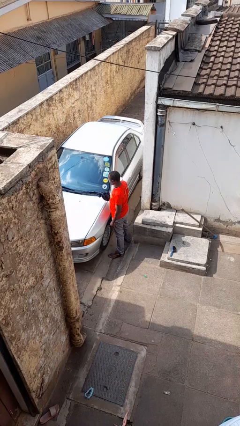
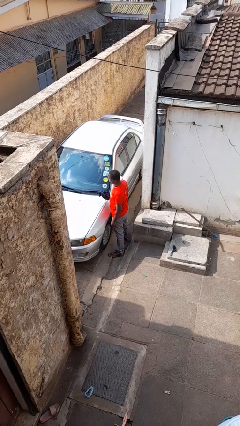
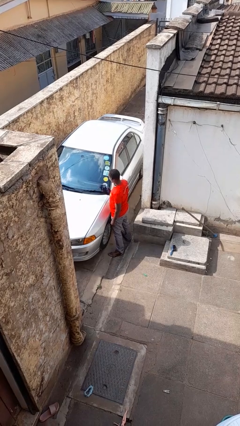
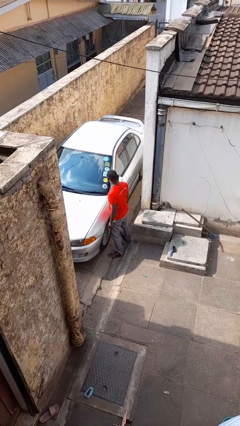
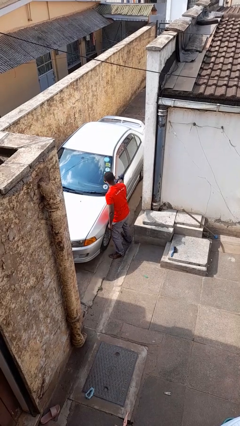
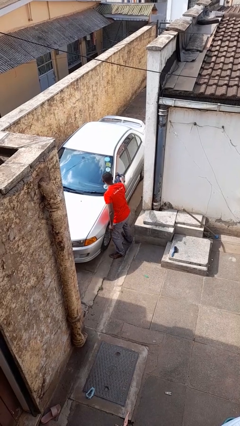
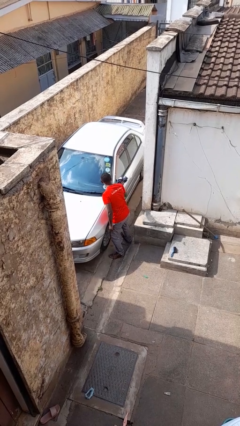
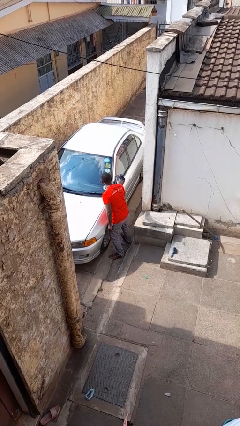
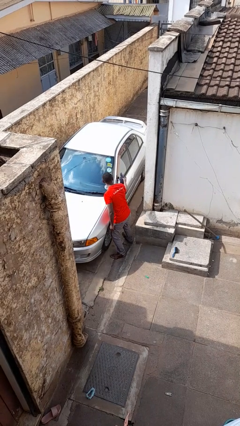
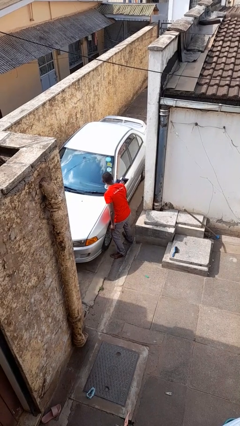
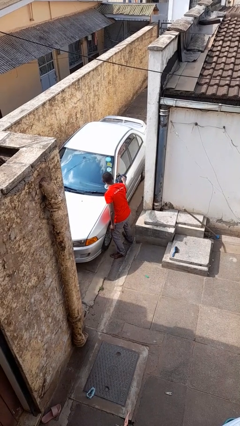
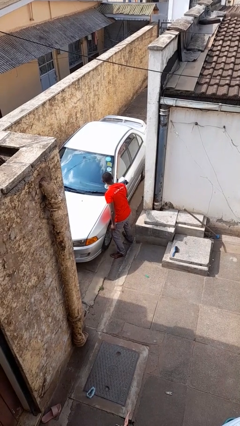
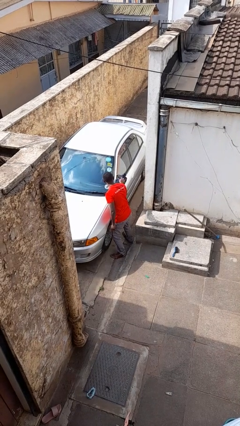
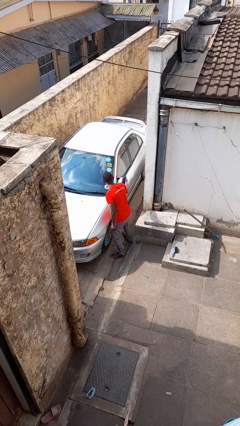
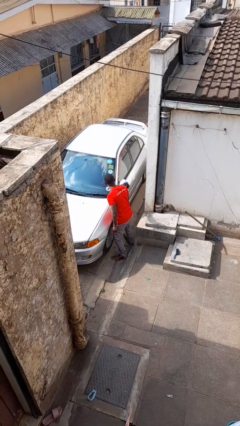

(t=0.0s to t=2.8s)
person polishes car with rag

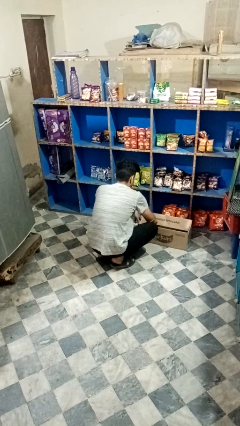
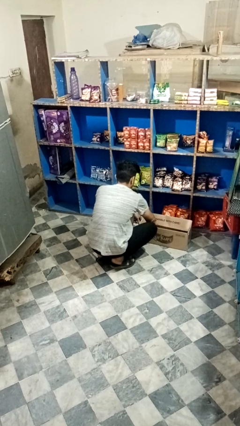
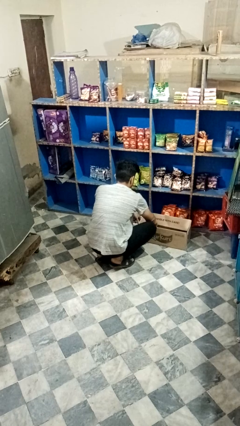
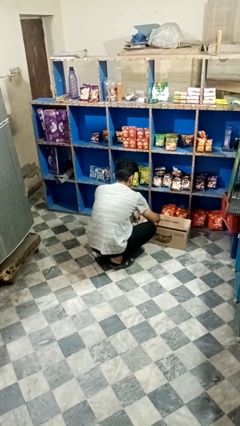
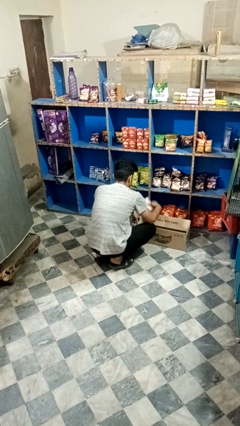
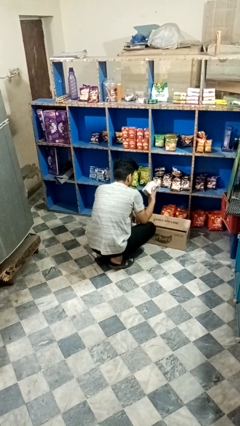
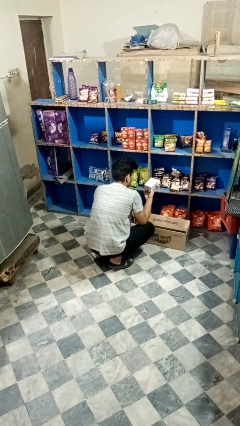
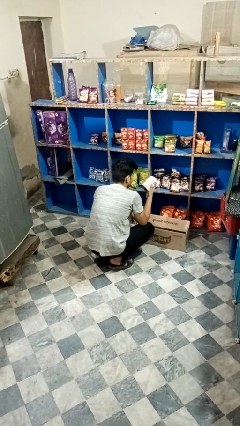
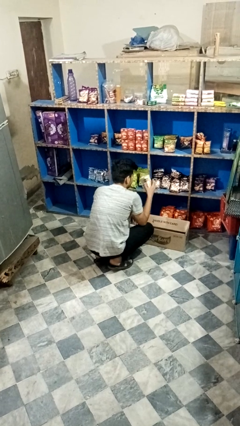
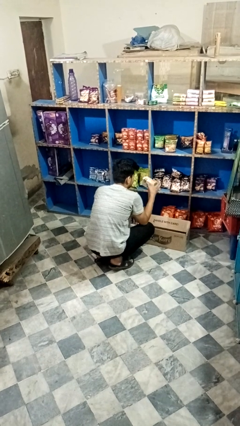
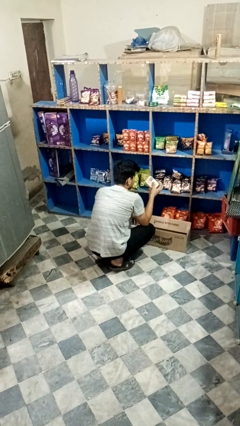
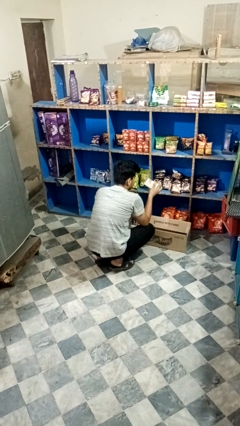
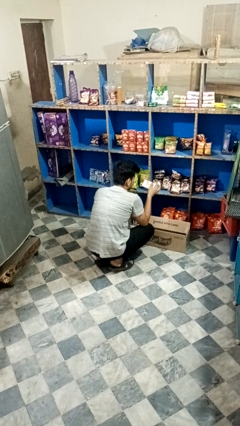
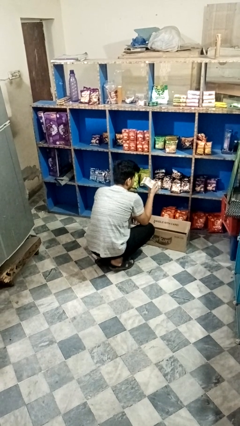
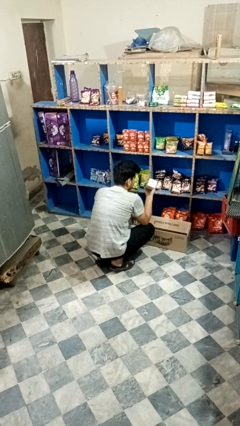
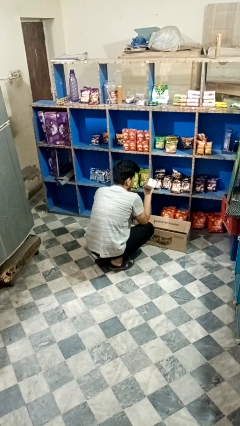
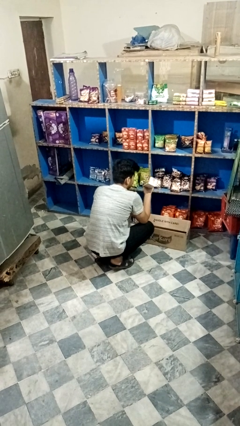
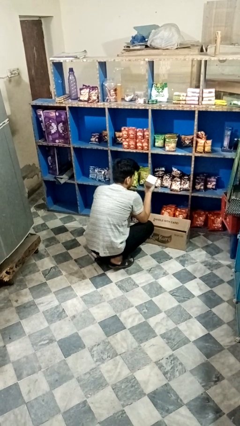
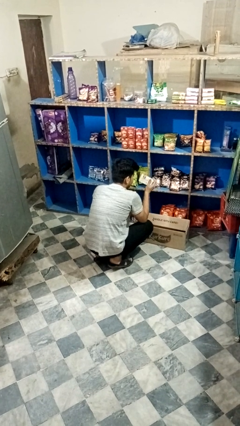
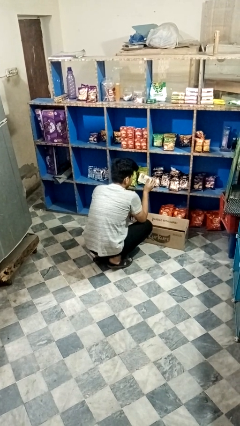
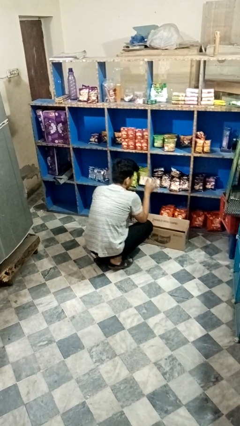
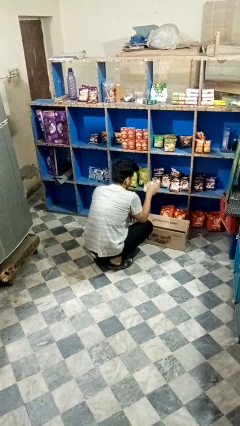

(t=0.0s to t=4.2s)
person takes object from box

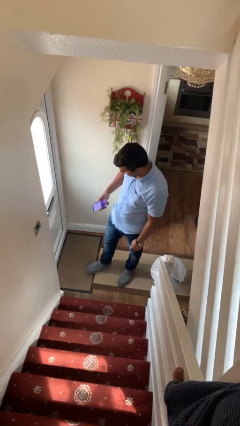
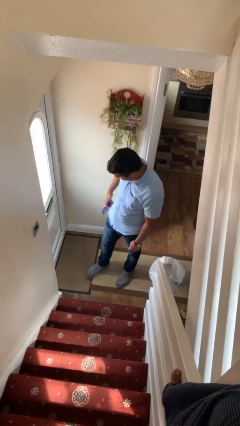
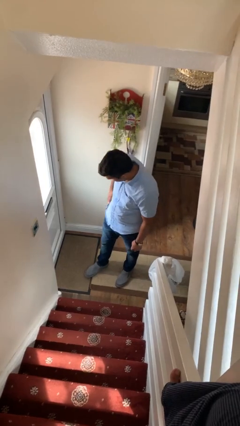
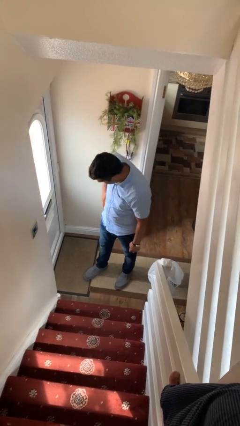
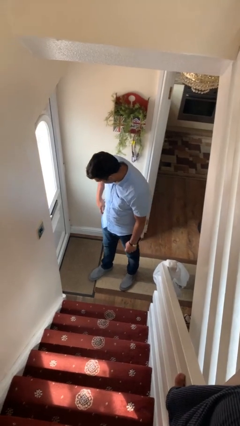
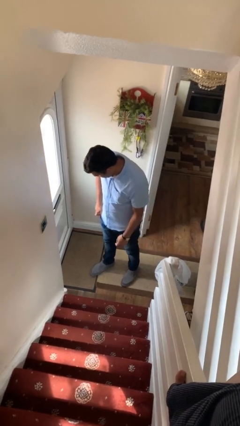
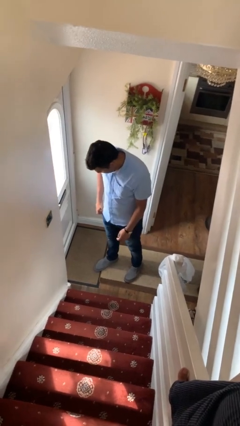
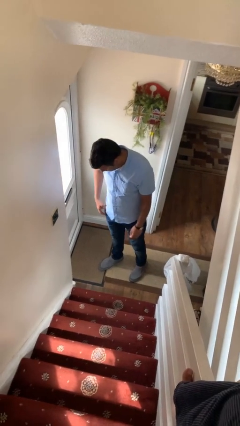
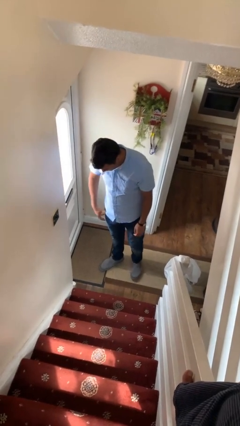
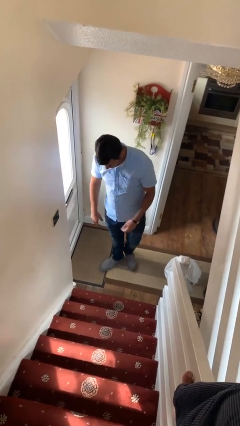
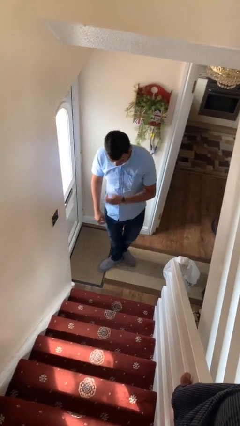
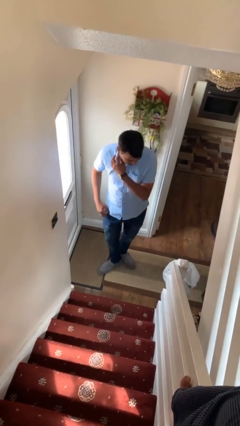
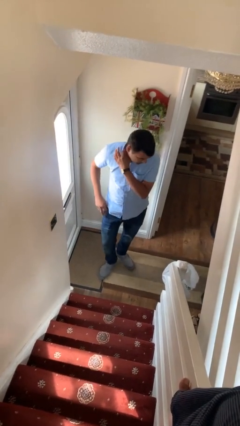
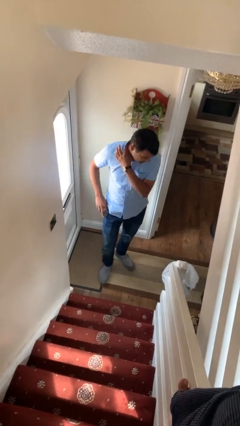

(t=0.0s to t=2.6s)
person puts phone into pocket

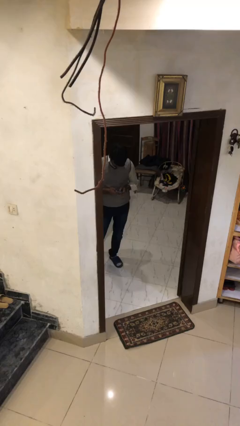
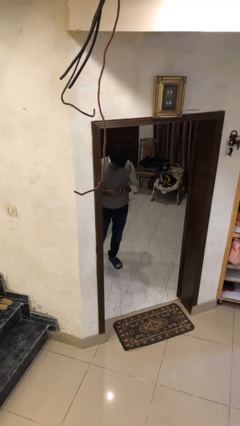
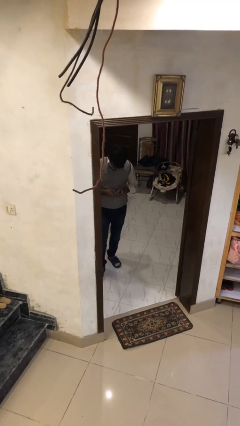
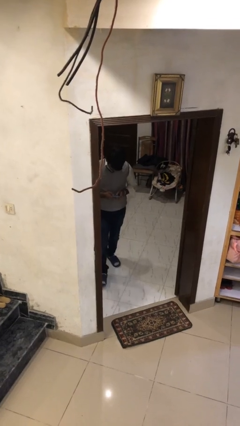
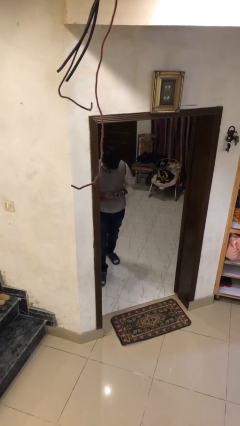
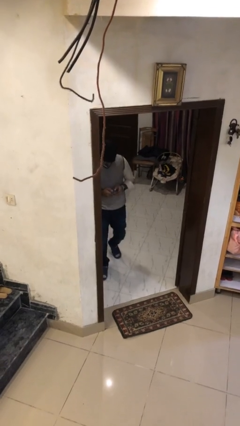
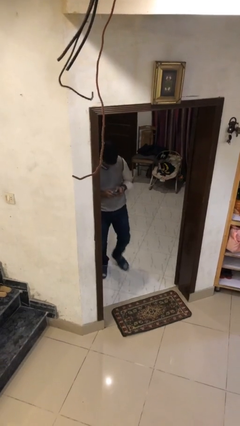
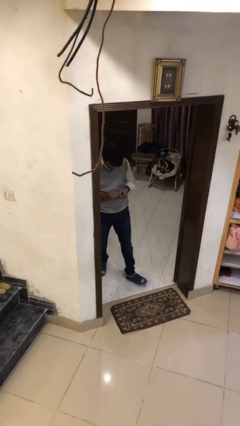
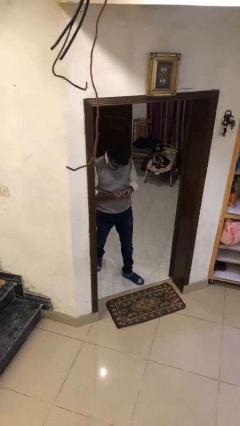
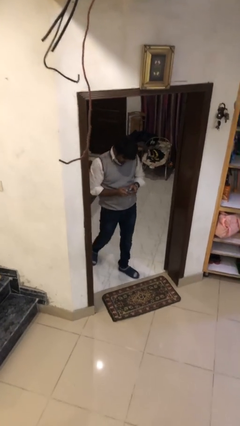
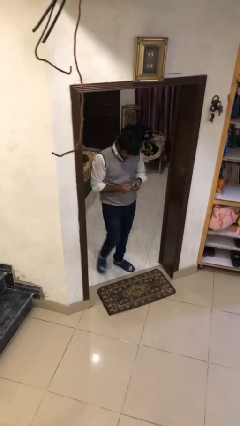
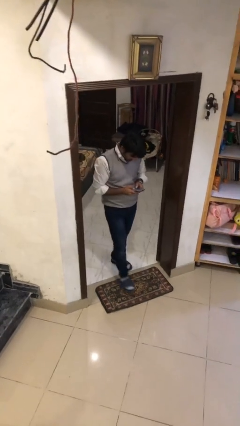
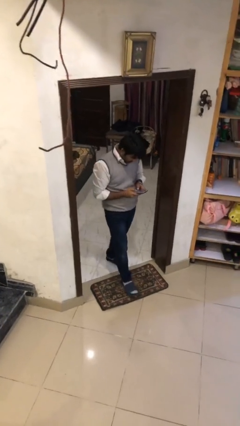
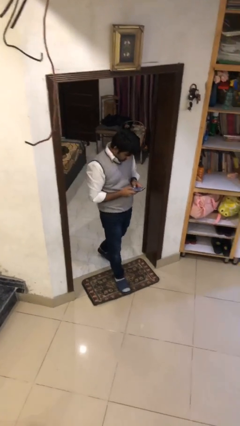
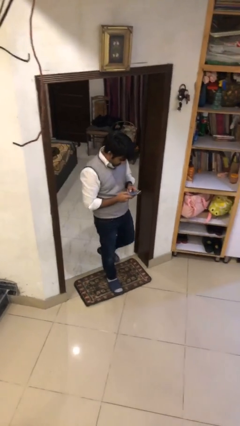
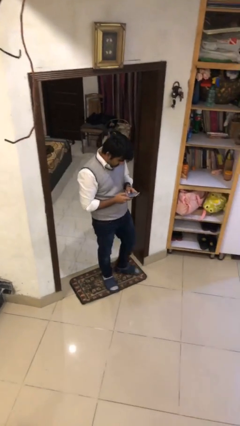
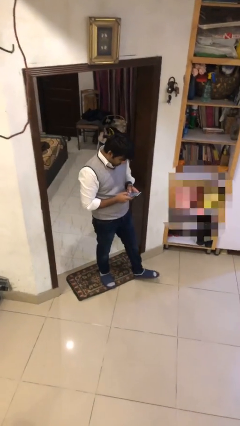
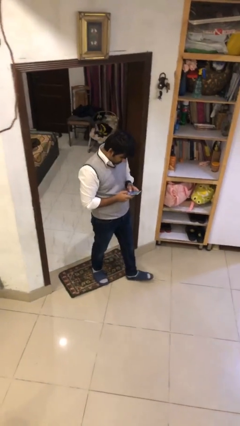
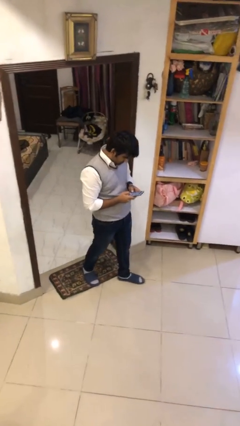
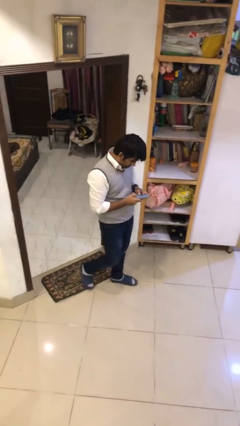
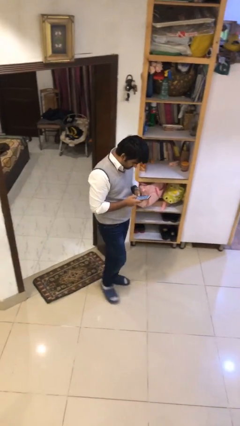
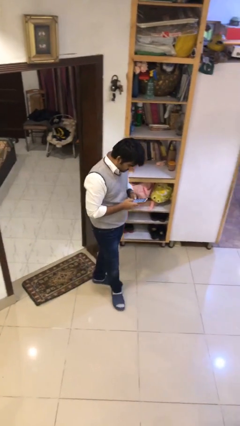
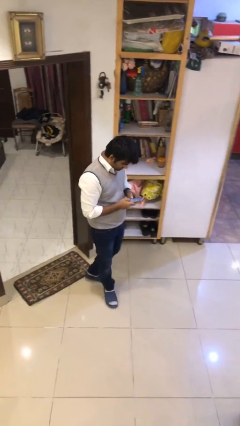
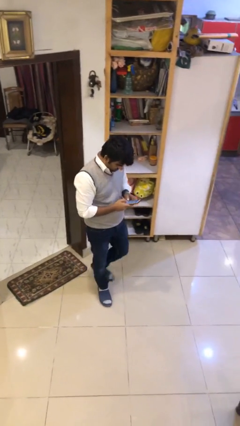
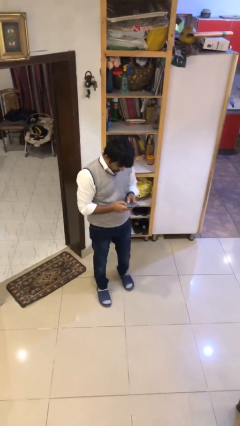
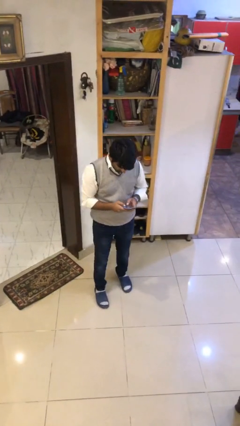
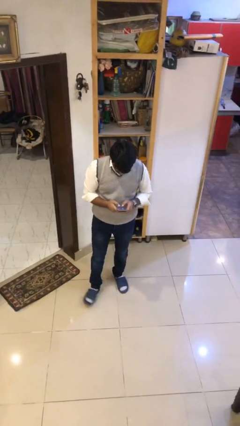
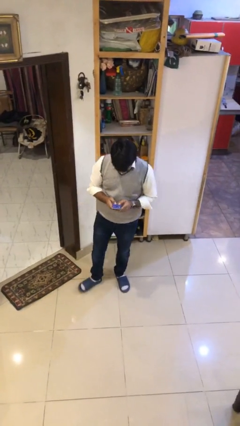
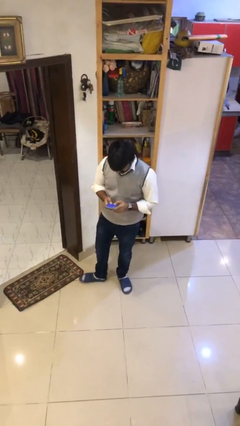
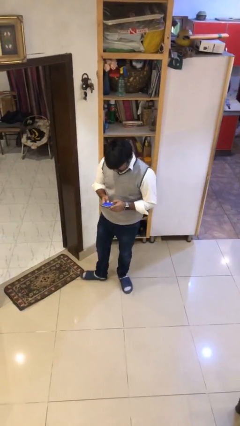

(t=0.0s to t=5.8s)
person enters scene through structure

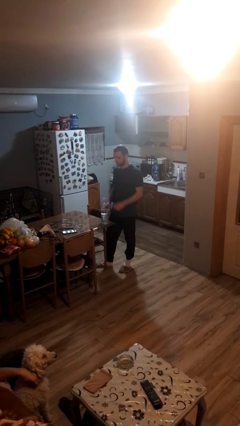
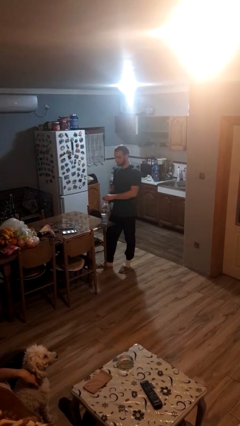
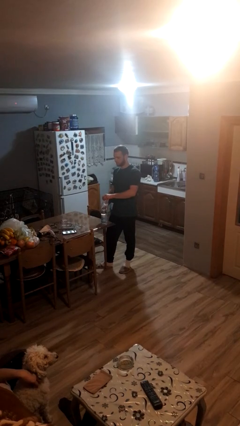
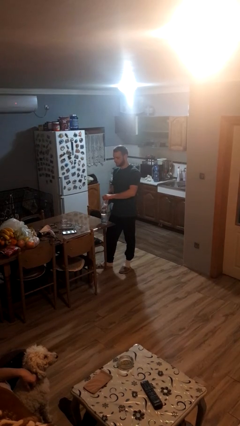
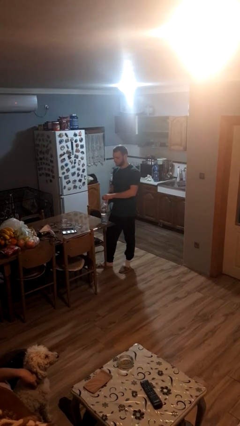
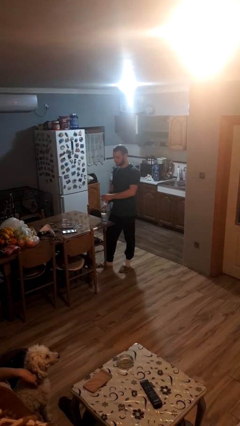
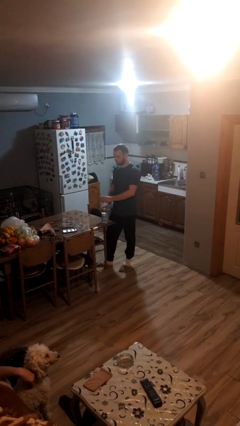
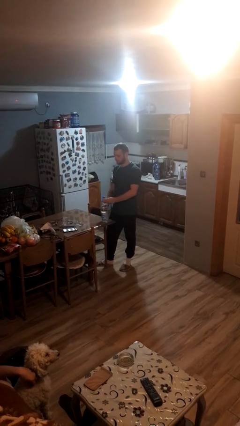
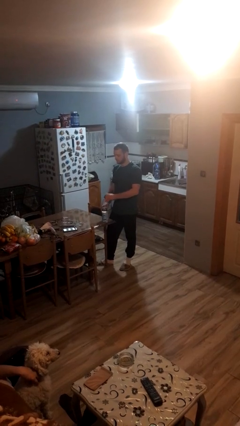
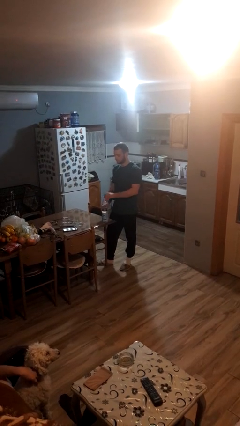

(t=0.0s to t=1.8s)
person screws lid to bottle

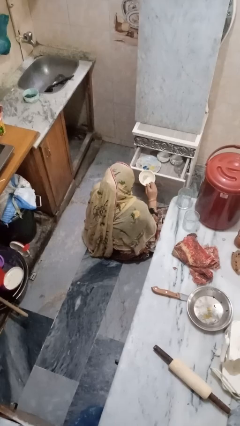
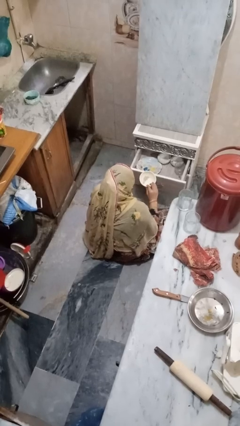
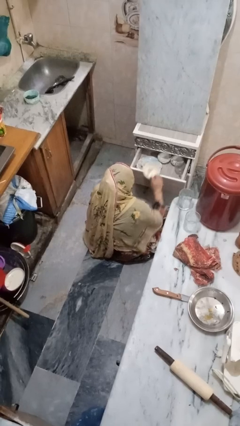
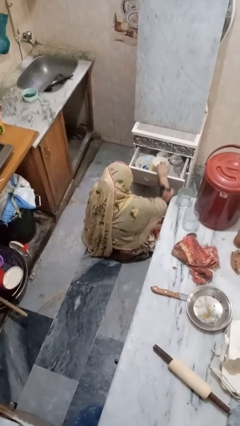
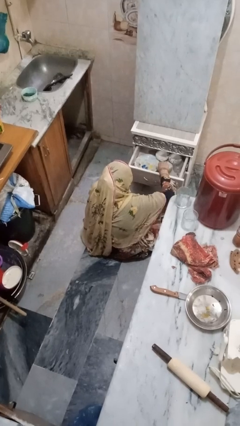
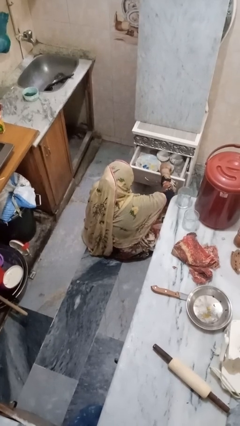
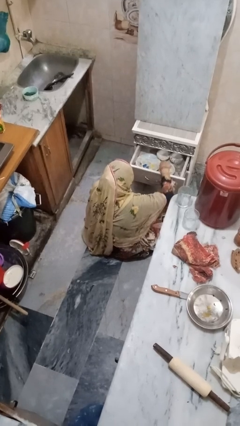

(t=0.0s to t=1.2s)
person puts object into kitchen drawer
